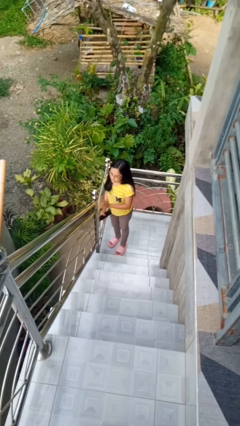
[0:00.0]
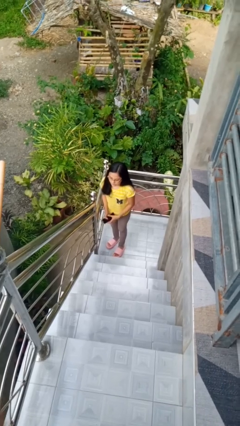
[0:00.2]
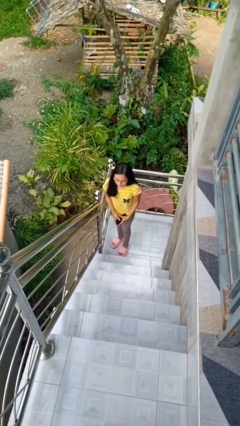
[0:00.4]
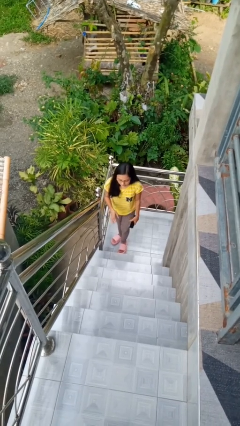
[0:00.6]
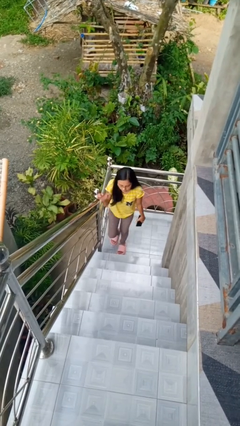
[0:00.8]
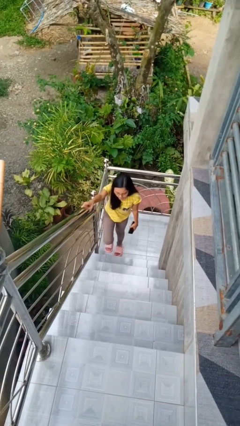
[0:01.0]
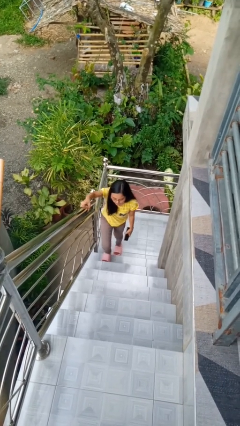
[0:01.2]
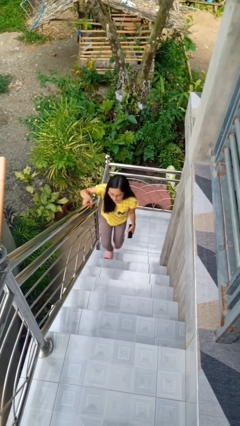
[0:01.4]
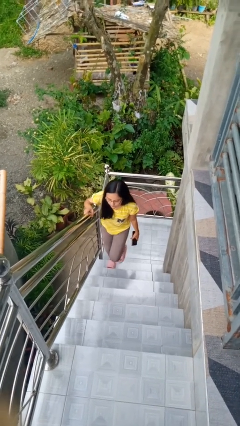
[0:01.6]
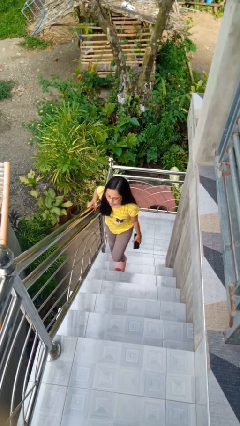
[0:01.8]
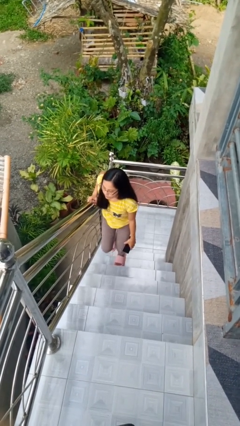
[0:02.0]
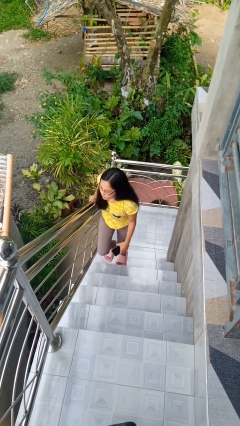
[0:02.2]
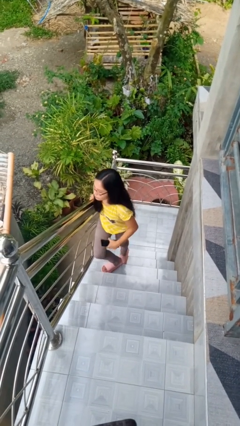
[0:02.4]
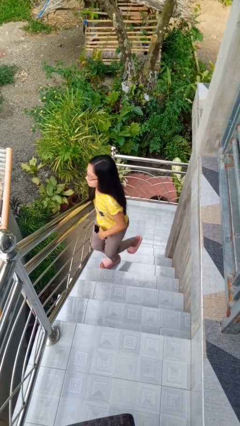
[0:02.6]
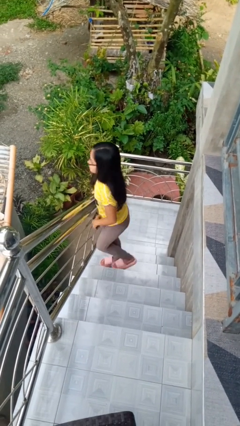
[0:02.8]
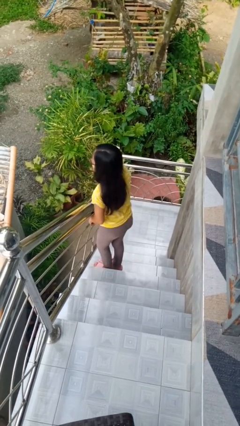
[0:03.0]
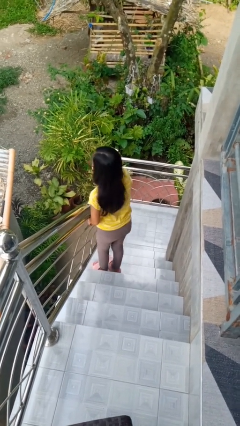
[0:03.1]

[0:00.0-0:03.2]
person climbs up stairs

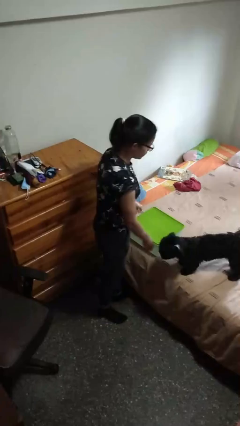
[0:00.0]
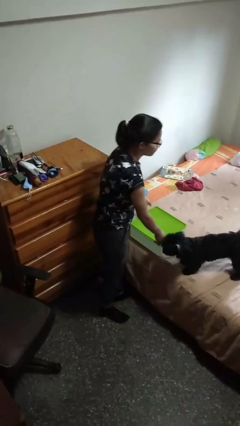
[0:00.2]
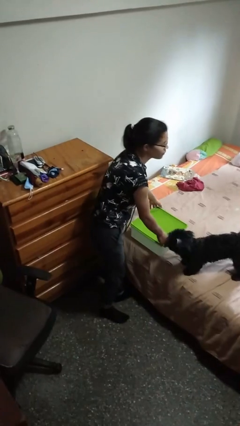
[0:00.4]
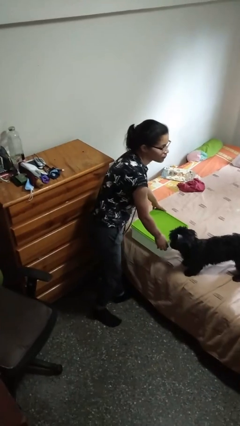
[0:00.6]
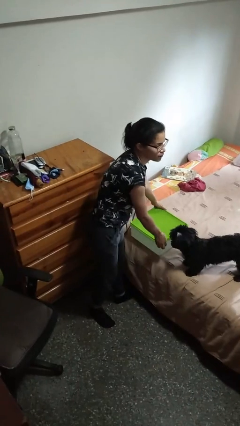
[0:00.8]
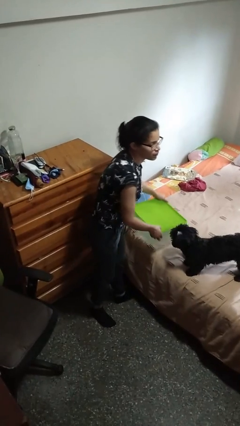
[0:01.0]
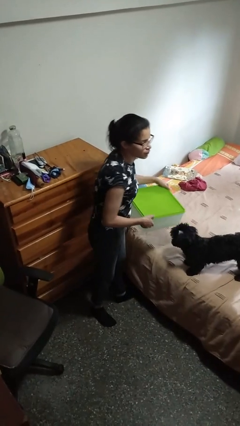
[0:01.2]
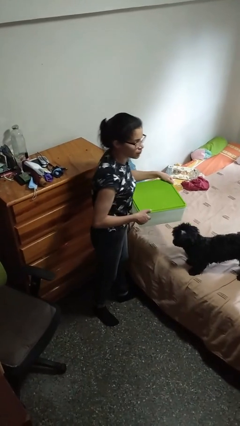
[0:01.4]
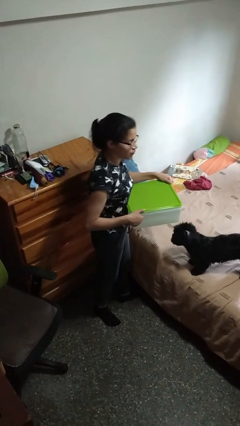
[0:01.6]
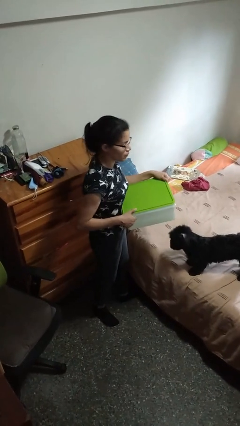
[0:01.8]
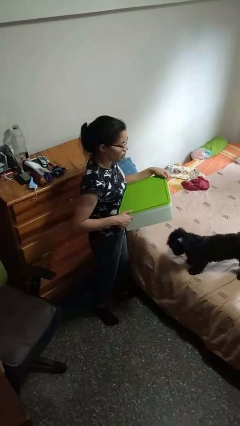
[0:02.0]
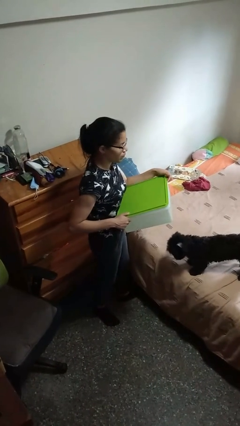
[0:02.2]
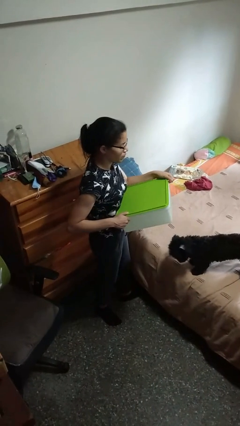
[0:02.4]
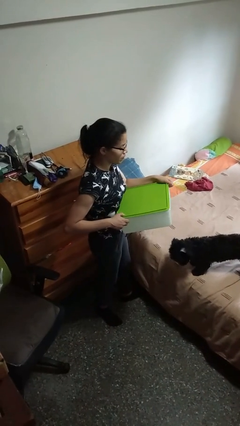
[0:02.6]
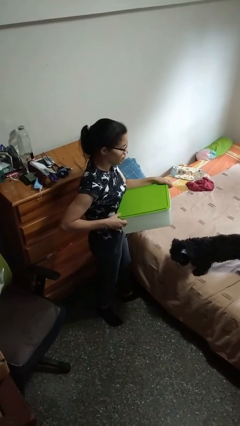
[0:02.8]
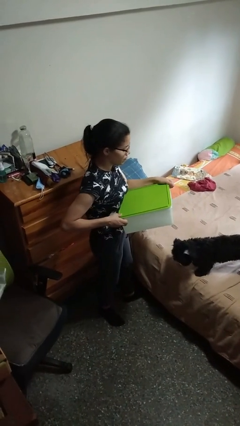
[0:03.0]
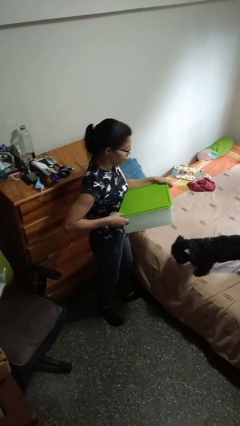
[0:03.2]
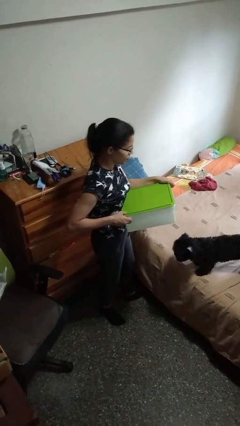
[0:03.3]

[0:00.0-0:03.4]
person picks up object from bed

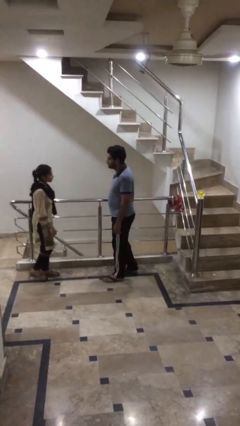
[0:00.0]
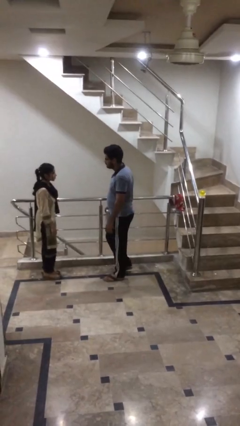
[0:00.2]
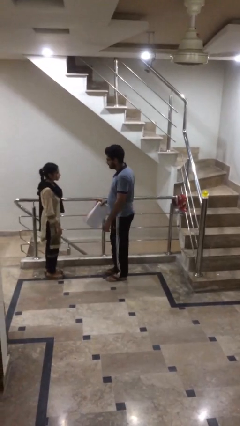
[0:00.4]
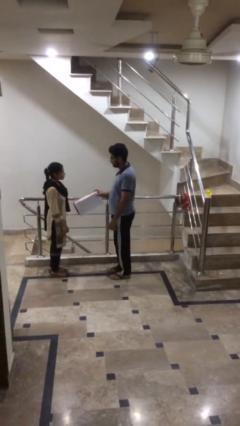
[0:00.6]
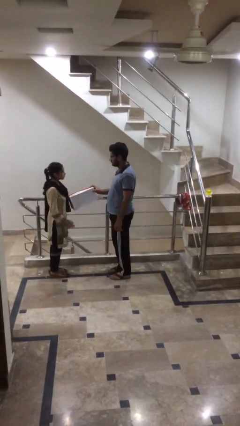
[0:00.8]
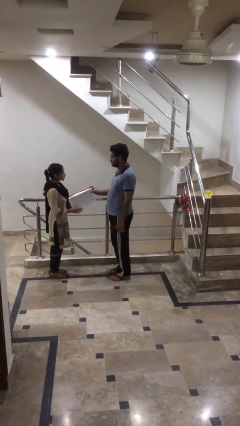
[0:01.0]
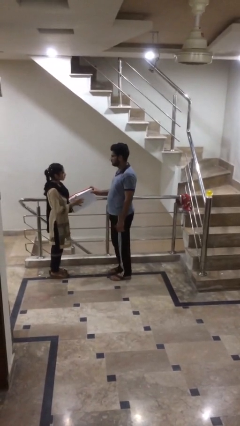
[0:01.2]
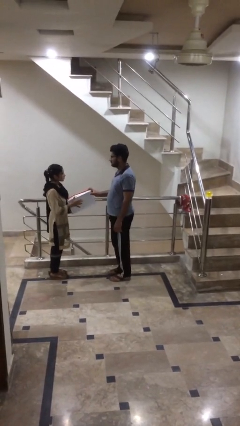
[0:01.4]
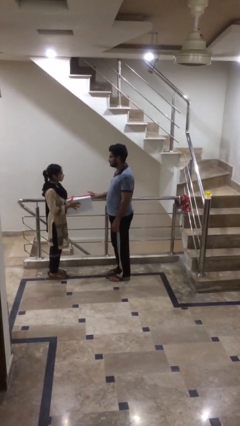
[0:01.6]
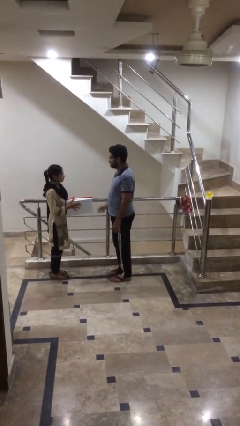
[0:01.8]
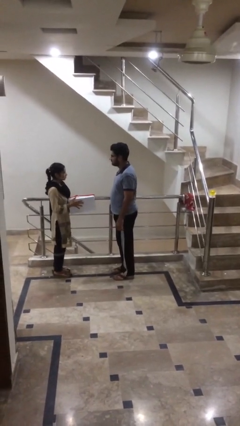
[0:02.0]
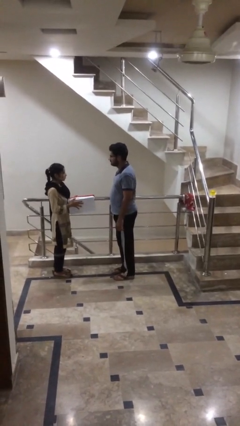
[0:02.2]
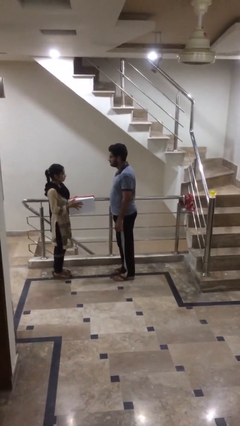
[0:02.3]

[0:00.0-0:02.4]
person transfers object to person

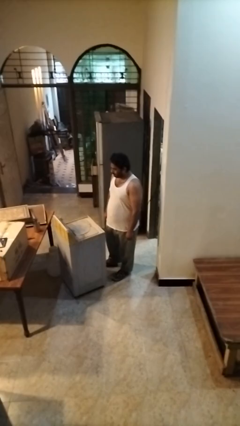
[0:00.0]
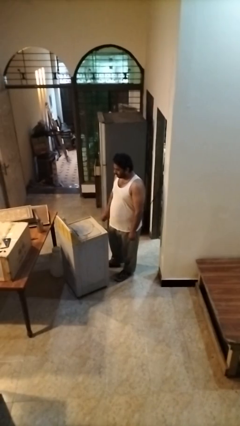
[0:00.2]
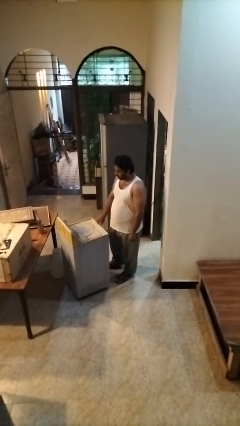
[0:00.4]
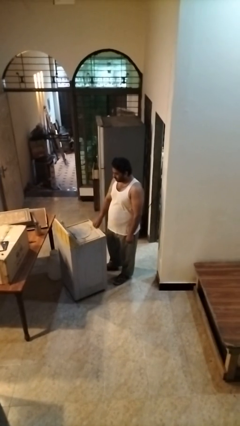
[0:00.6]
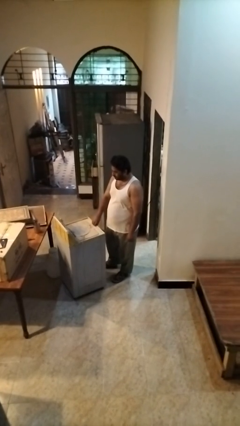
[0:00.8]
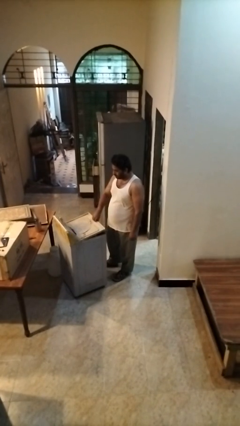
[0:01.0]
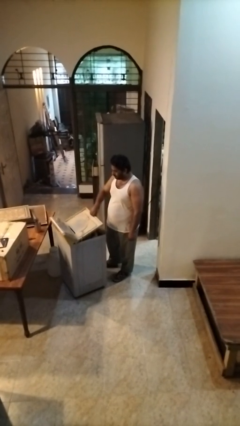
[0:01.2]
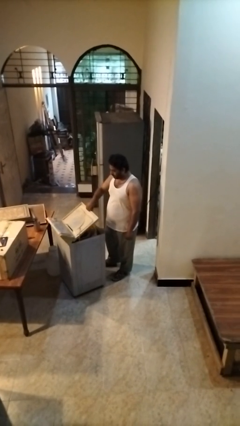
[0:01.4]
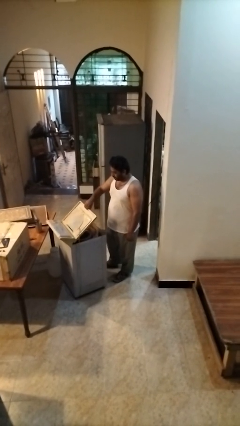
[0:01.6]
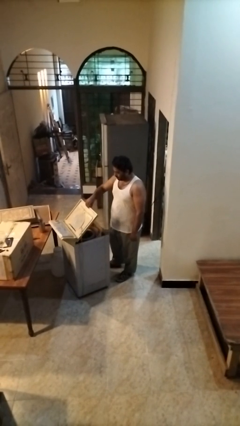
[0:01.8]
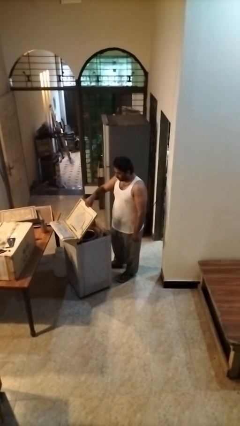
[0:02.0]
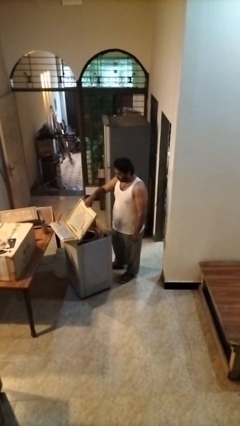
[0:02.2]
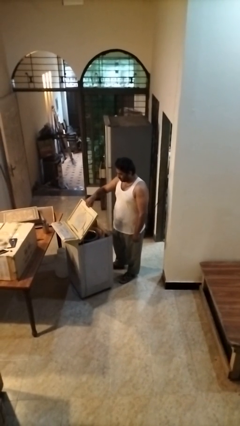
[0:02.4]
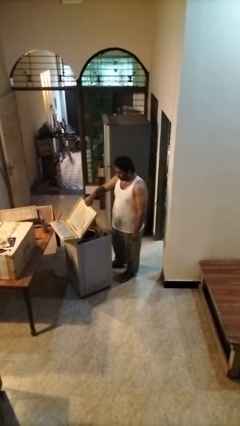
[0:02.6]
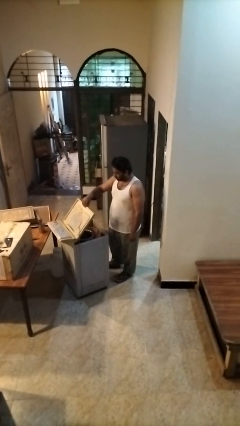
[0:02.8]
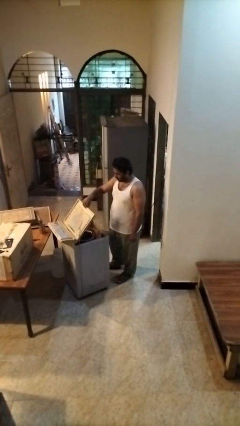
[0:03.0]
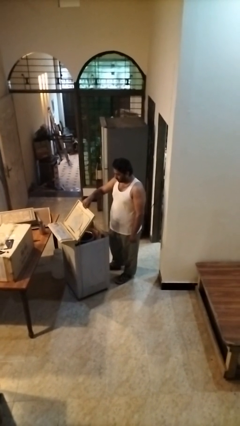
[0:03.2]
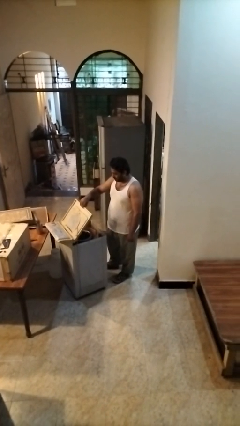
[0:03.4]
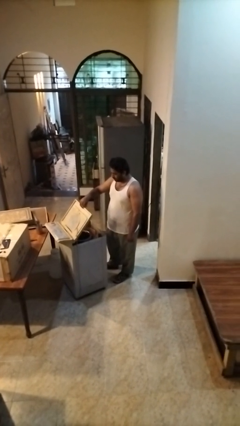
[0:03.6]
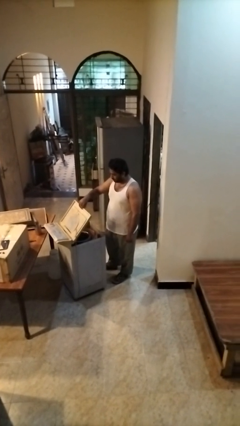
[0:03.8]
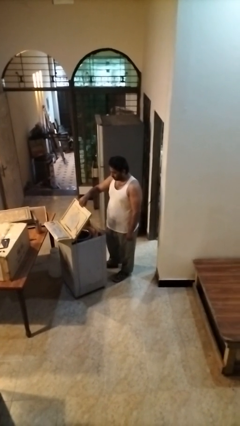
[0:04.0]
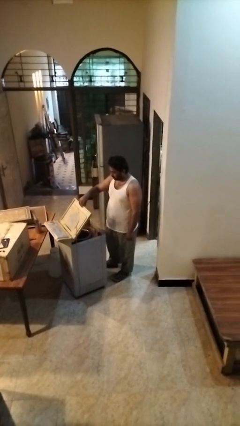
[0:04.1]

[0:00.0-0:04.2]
person opens clothes washer

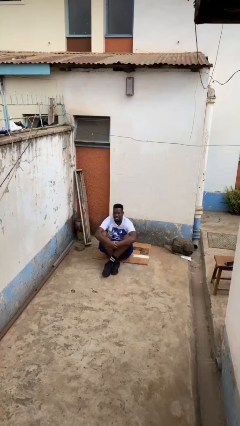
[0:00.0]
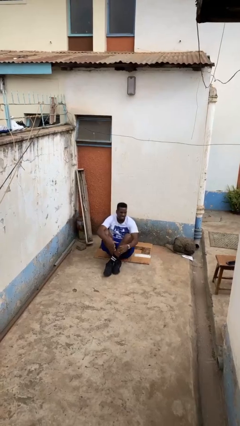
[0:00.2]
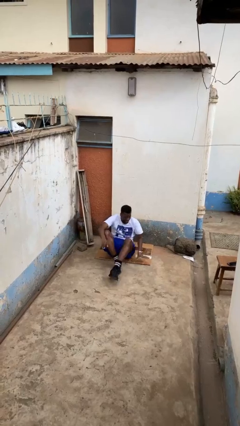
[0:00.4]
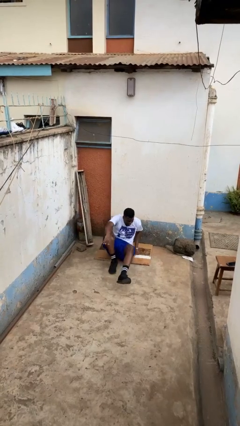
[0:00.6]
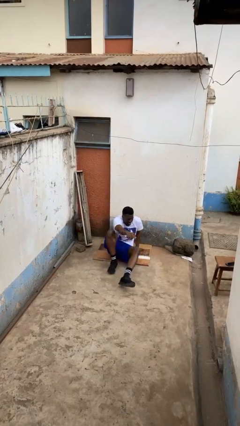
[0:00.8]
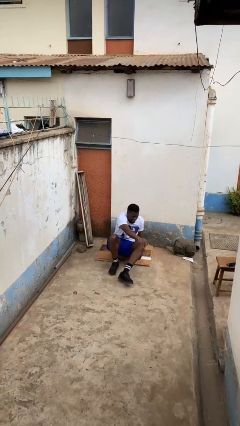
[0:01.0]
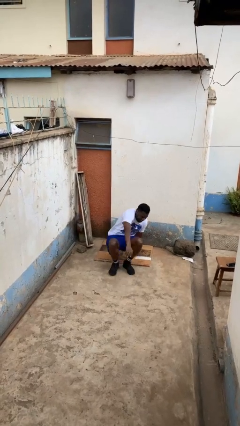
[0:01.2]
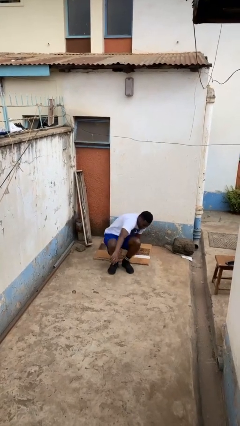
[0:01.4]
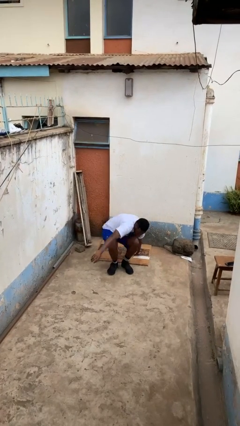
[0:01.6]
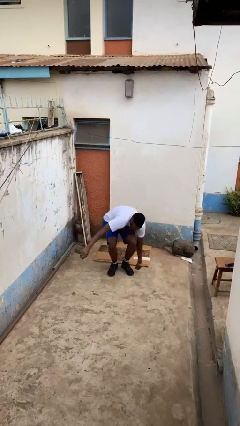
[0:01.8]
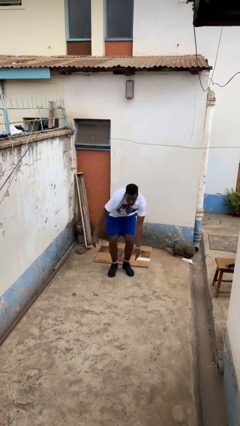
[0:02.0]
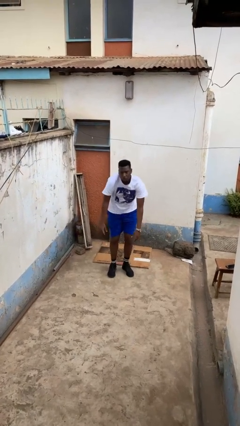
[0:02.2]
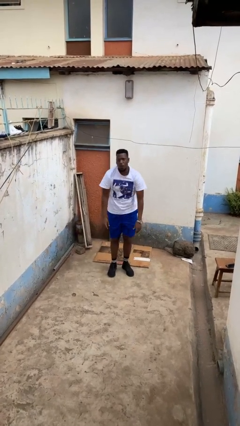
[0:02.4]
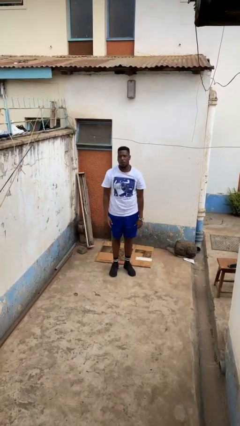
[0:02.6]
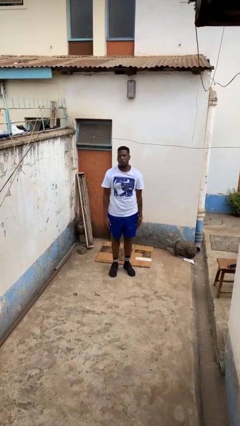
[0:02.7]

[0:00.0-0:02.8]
person stands up from floor

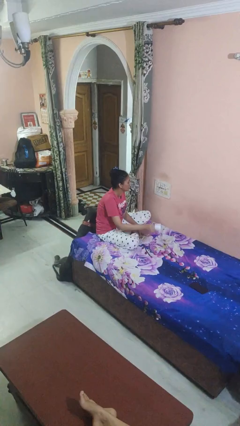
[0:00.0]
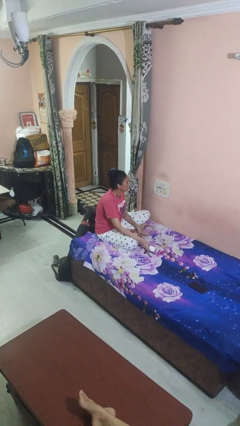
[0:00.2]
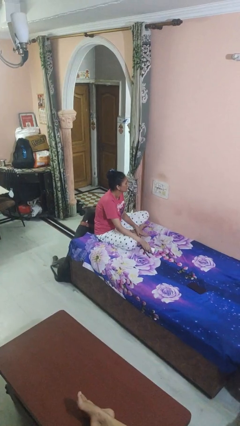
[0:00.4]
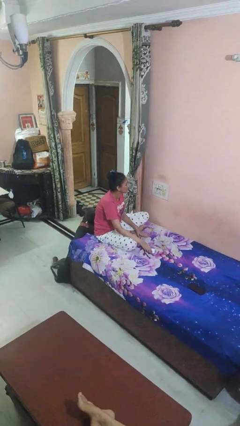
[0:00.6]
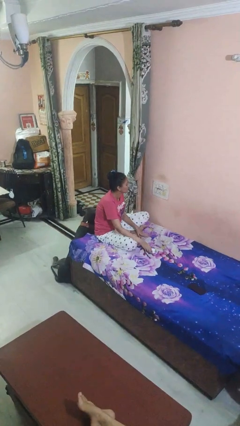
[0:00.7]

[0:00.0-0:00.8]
person unplugs from electrical socket

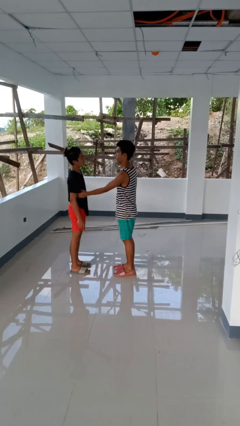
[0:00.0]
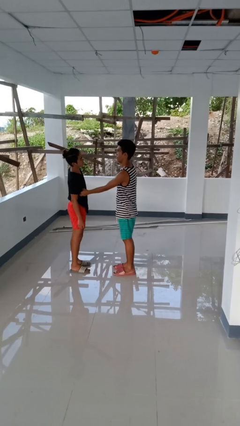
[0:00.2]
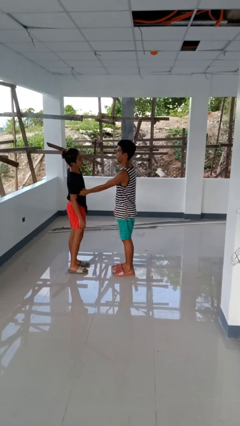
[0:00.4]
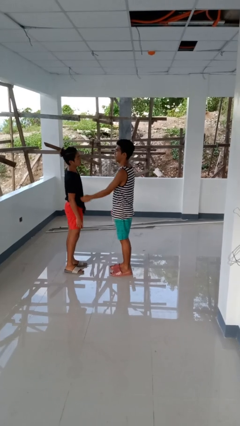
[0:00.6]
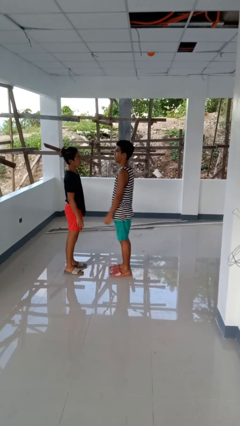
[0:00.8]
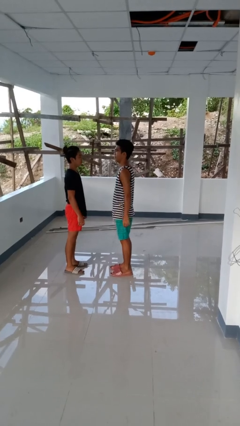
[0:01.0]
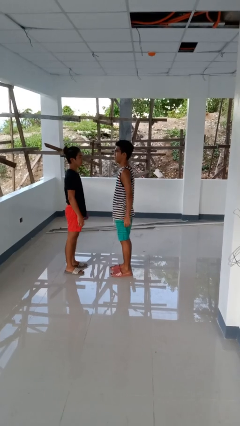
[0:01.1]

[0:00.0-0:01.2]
person tickles person
